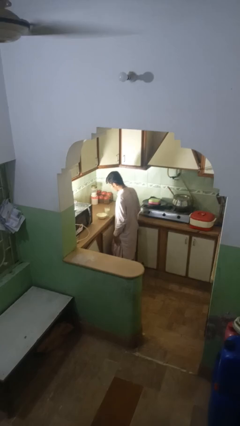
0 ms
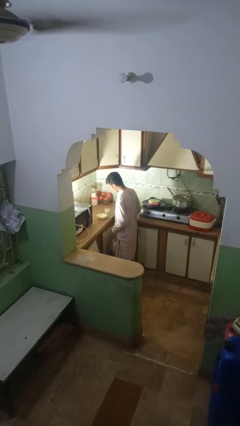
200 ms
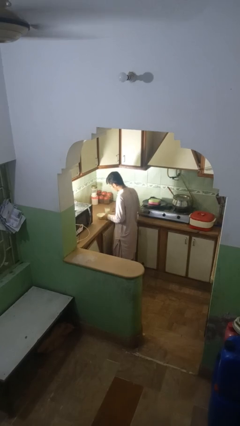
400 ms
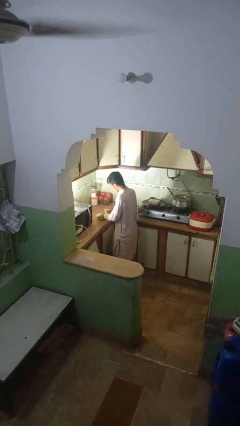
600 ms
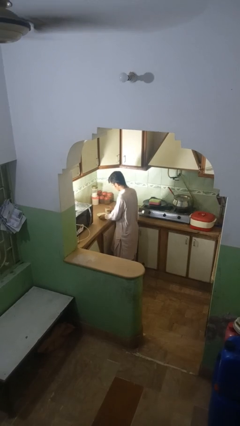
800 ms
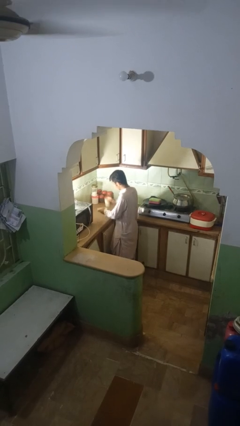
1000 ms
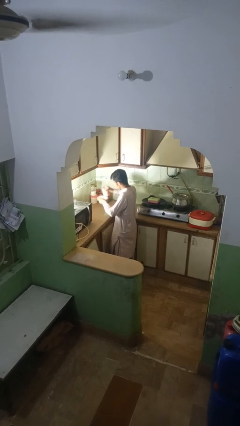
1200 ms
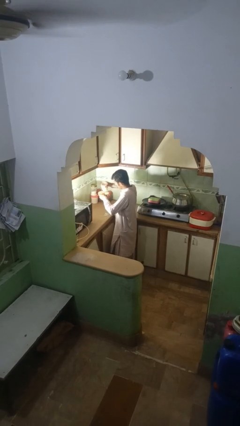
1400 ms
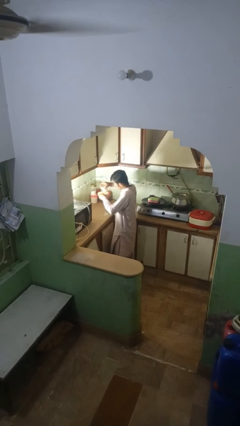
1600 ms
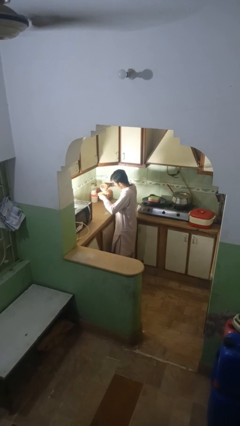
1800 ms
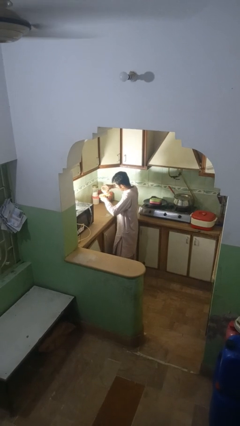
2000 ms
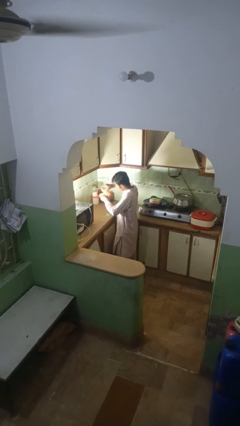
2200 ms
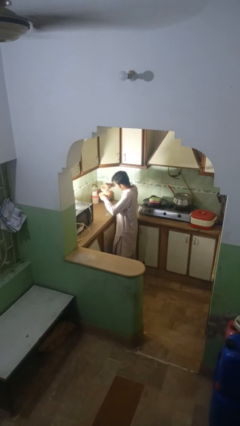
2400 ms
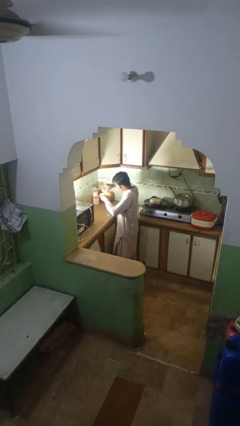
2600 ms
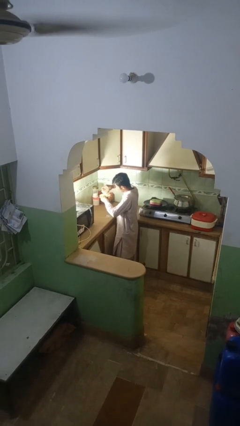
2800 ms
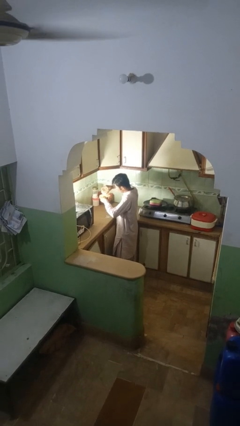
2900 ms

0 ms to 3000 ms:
person pours into bowl

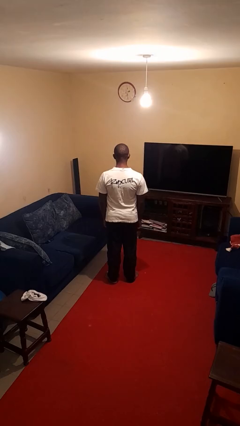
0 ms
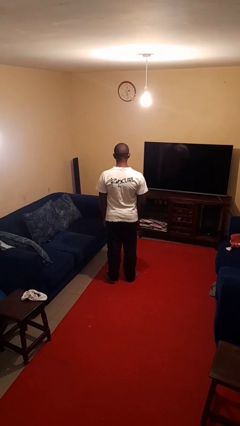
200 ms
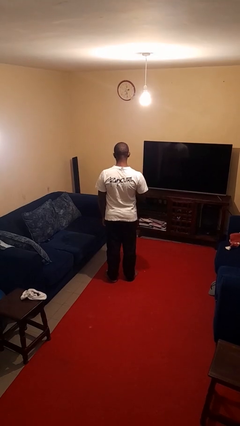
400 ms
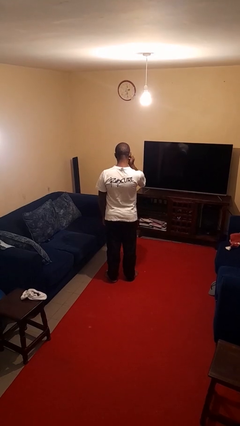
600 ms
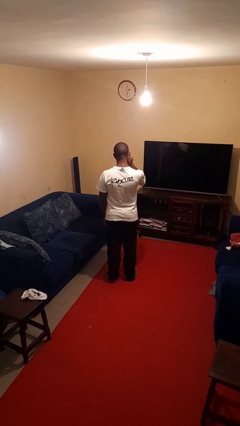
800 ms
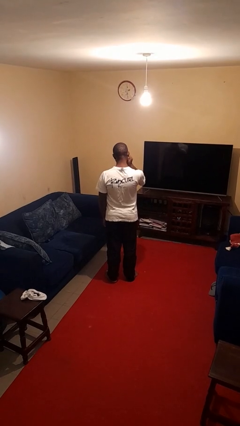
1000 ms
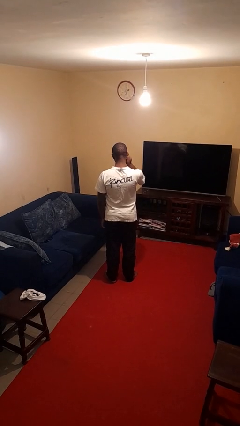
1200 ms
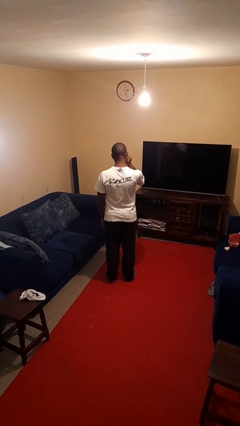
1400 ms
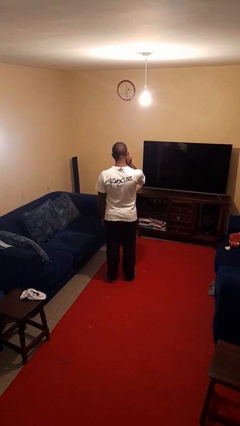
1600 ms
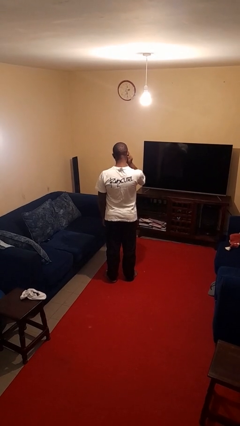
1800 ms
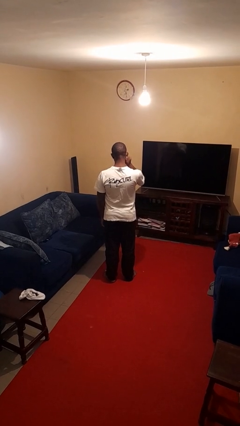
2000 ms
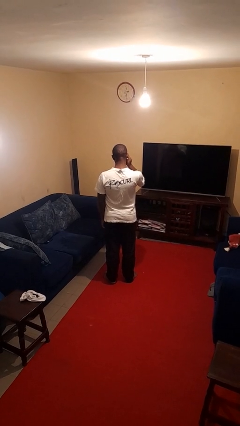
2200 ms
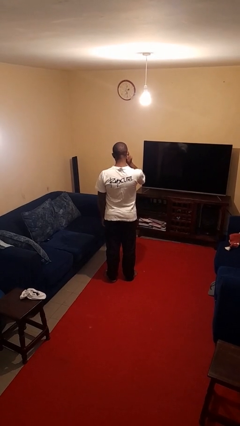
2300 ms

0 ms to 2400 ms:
person touches earlobe

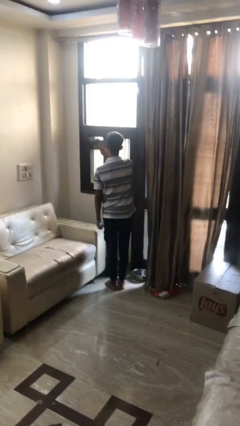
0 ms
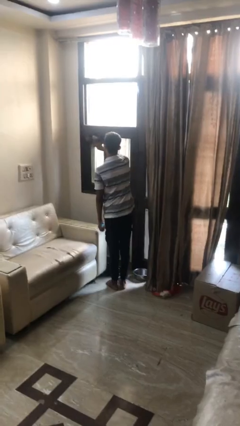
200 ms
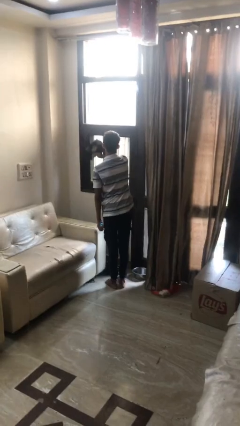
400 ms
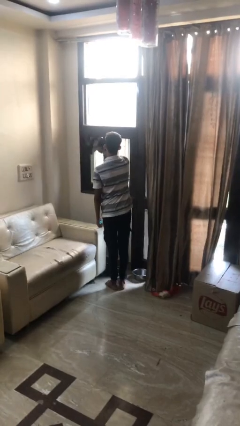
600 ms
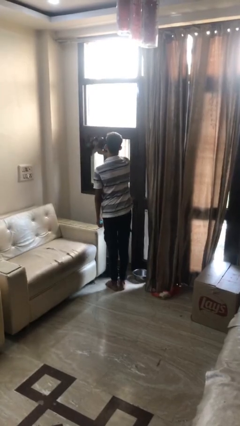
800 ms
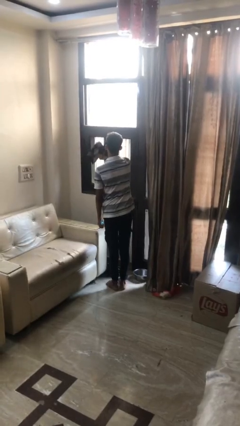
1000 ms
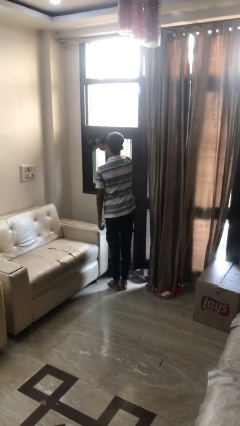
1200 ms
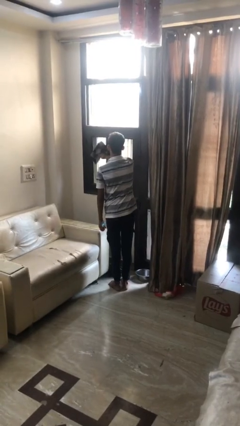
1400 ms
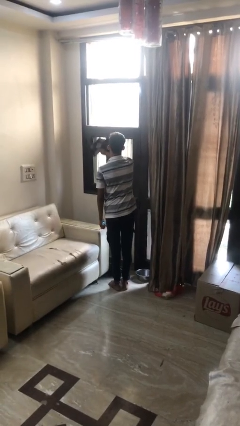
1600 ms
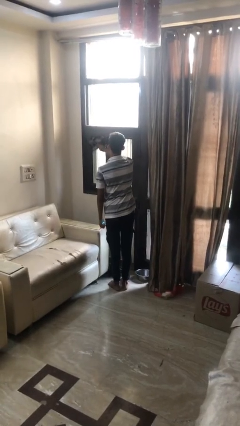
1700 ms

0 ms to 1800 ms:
person washes window

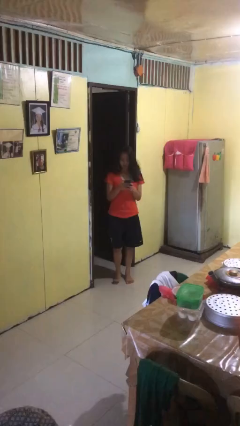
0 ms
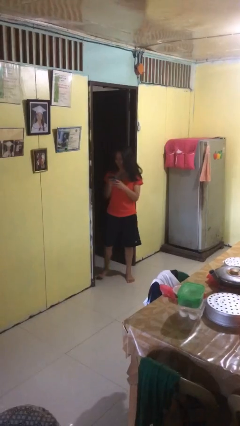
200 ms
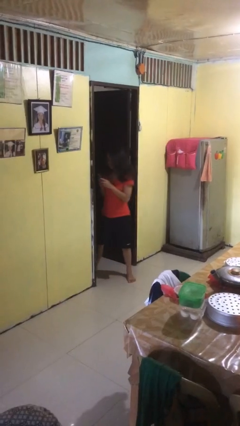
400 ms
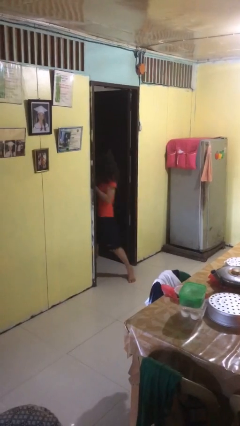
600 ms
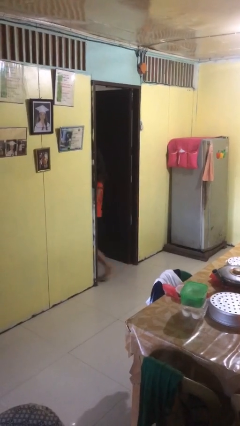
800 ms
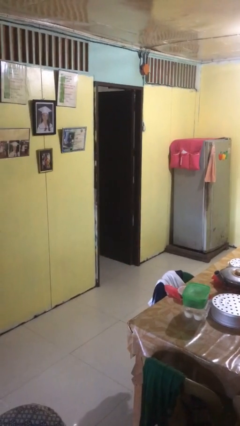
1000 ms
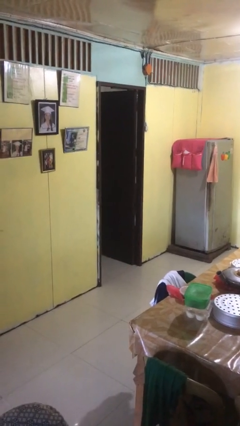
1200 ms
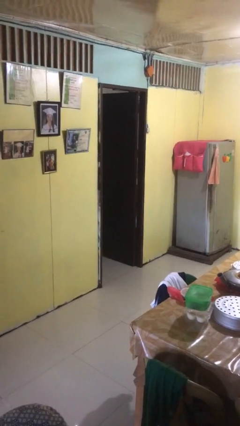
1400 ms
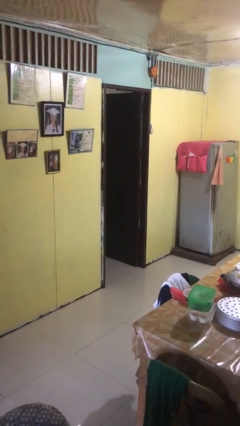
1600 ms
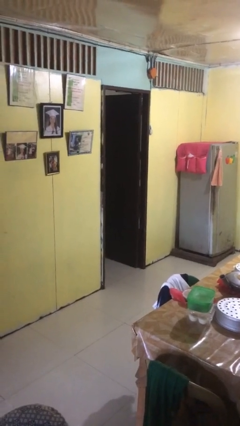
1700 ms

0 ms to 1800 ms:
person exits scene through structure

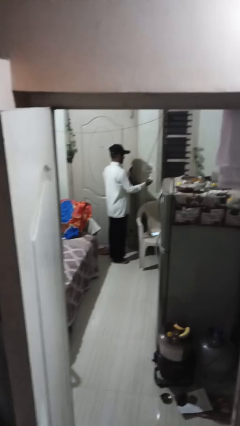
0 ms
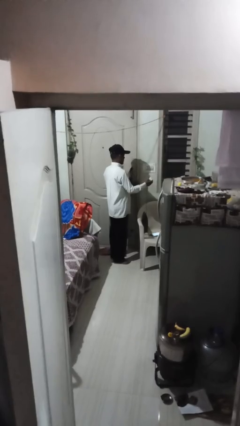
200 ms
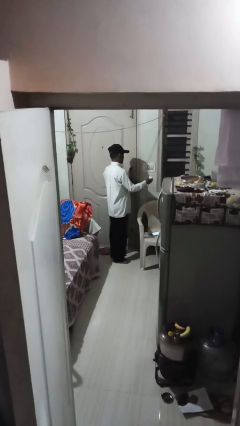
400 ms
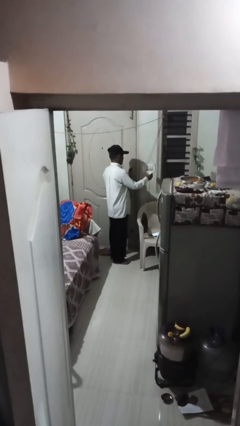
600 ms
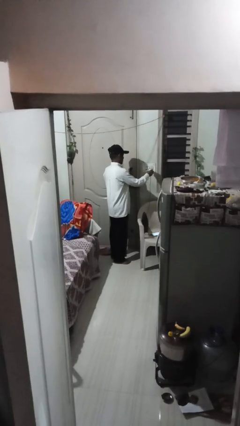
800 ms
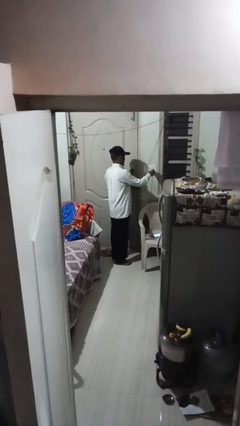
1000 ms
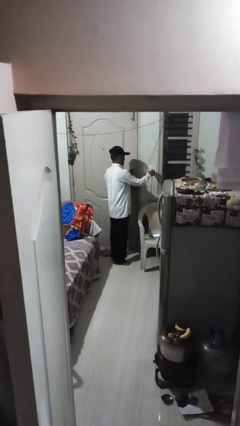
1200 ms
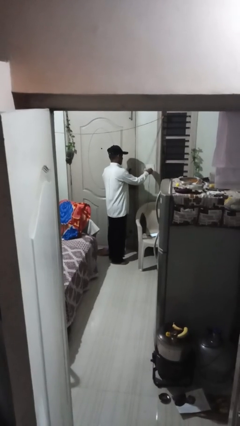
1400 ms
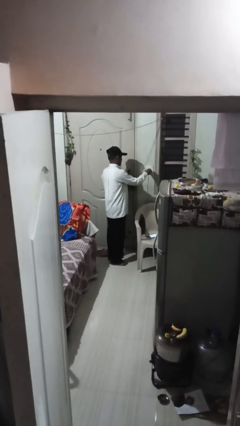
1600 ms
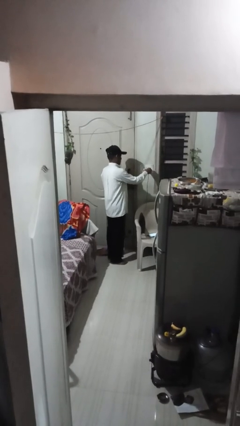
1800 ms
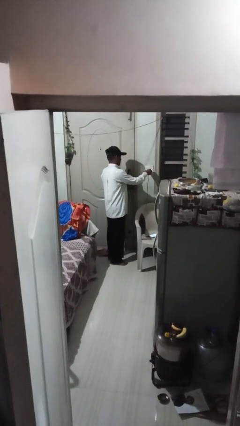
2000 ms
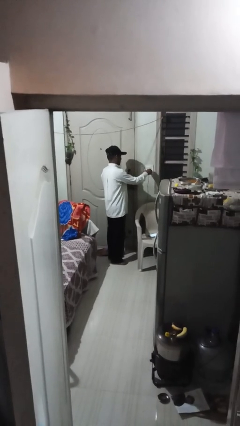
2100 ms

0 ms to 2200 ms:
person plugs into electrical socket

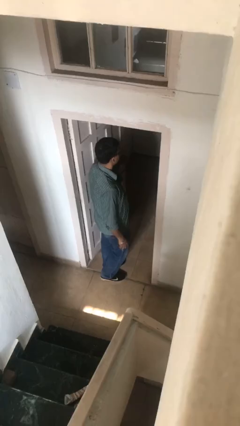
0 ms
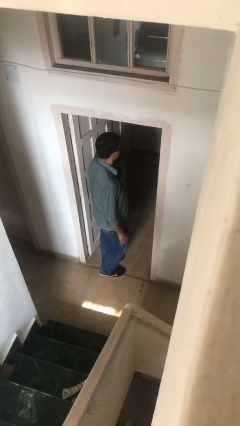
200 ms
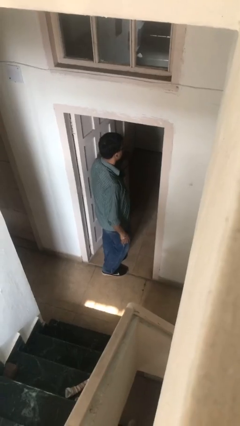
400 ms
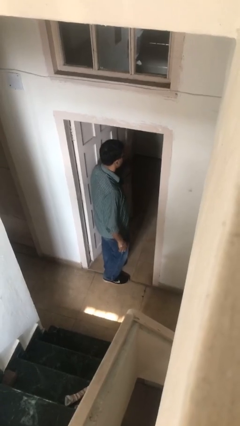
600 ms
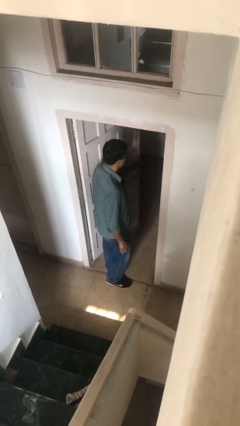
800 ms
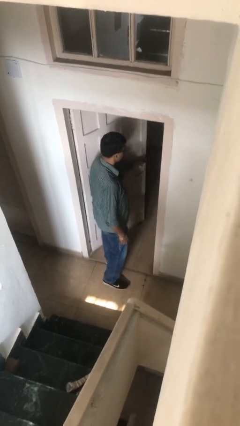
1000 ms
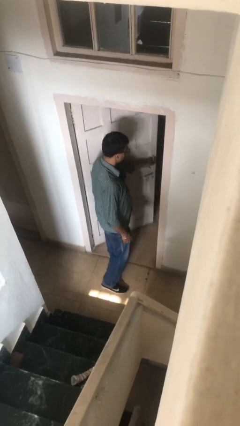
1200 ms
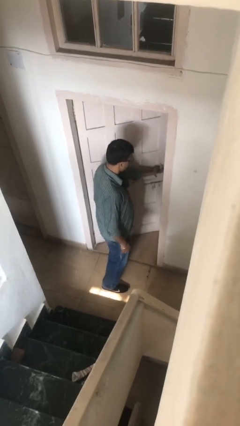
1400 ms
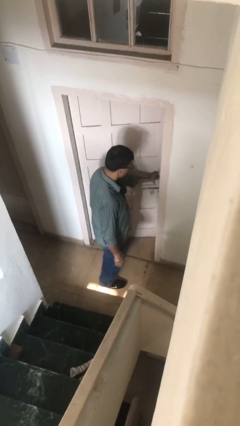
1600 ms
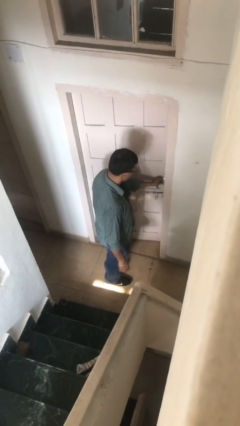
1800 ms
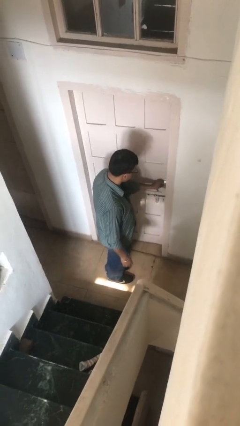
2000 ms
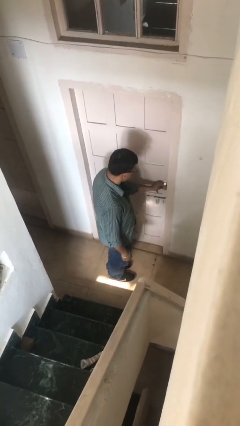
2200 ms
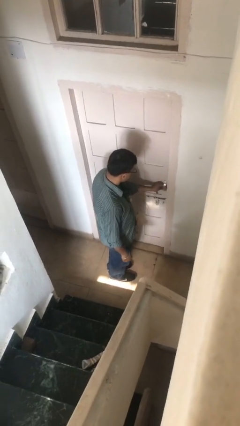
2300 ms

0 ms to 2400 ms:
person closes facility door

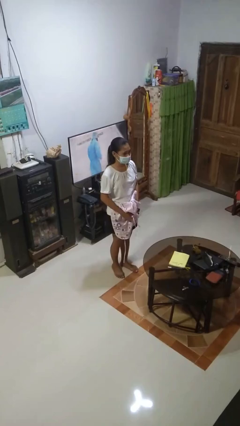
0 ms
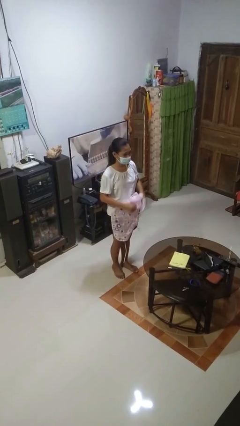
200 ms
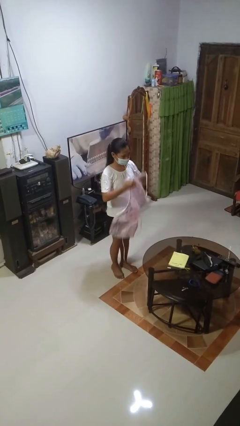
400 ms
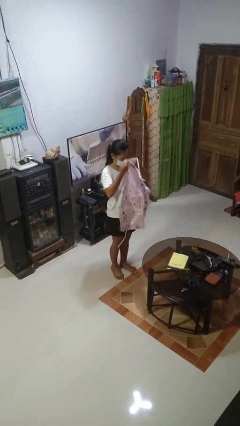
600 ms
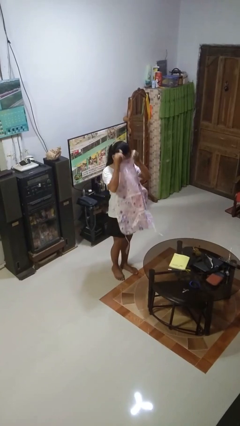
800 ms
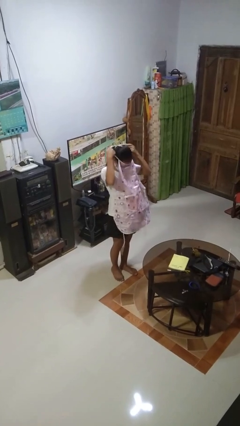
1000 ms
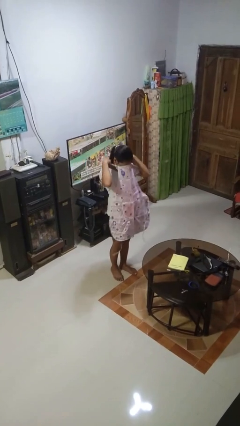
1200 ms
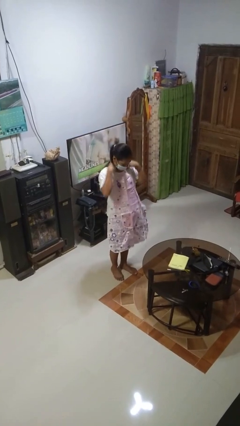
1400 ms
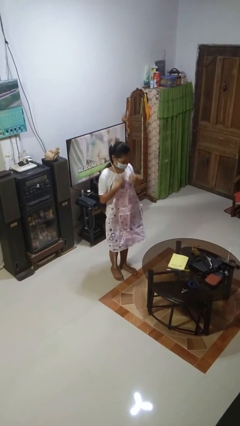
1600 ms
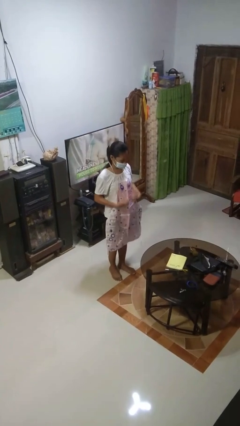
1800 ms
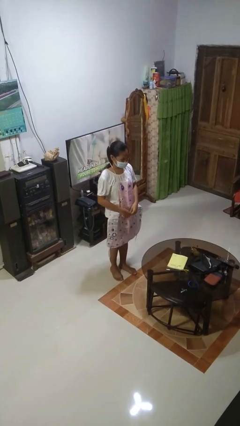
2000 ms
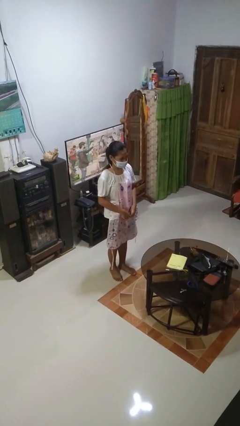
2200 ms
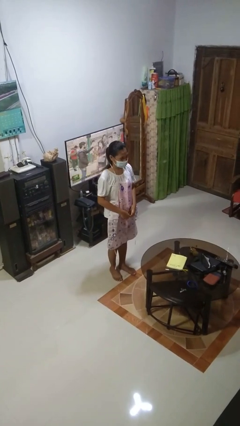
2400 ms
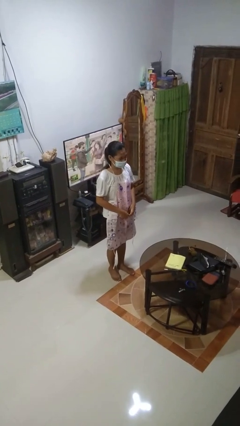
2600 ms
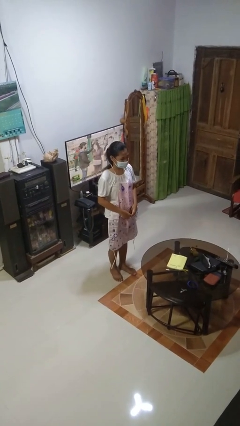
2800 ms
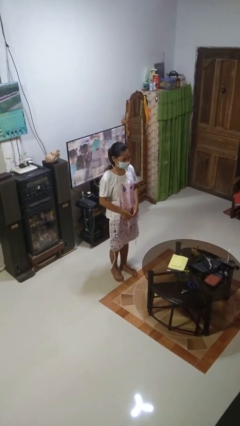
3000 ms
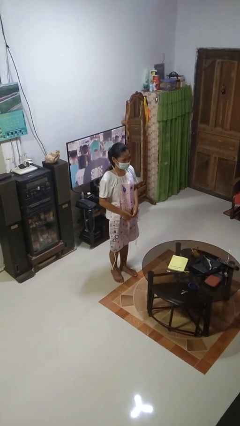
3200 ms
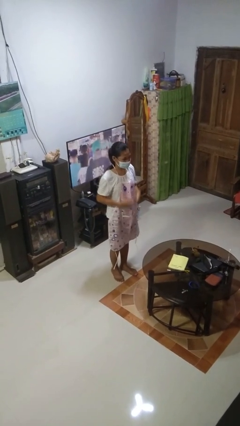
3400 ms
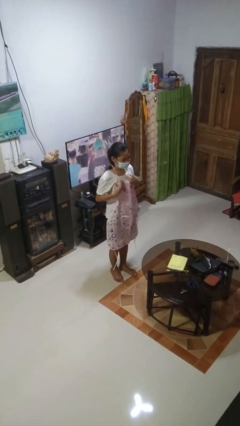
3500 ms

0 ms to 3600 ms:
person puts on apron

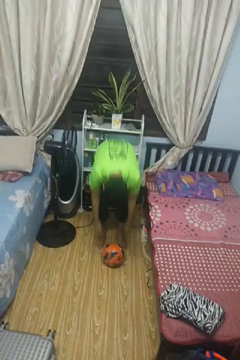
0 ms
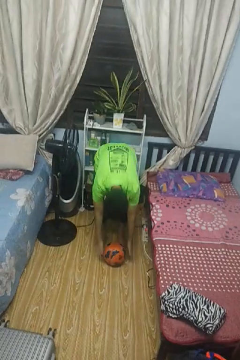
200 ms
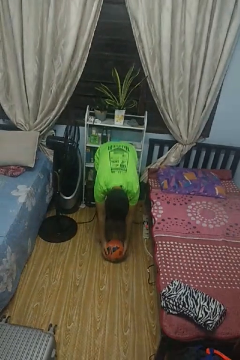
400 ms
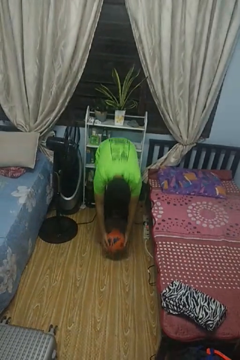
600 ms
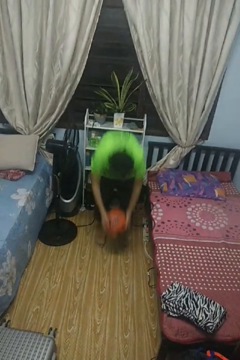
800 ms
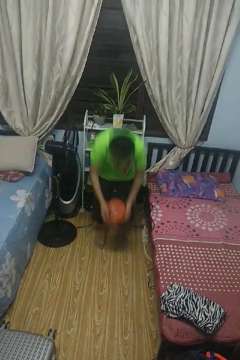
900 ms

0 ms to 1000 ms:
person picks up object from floor
